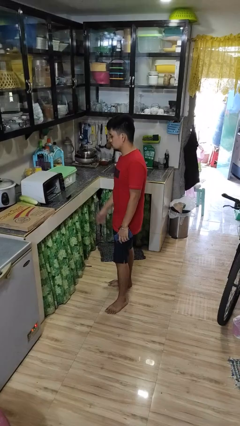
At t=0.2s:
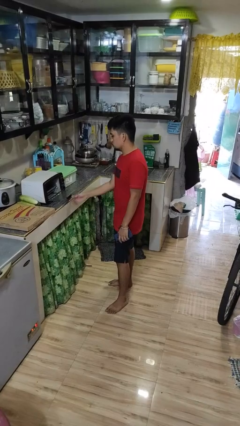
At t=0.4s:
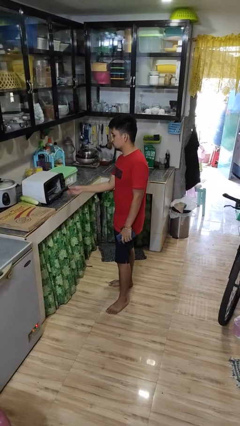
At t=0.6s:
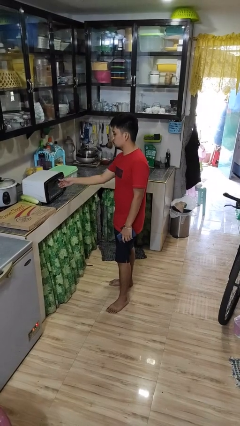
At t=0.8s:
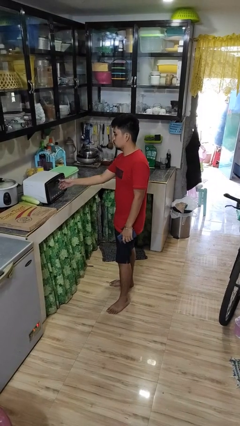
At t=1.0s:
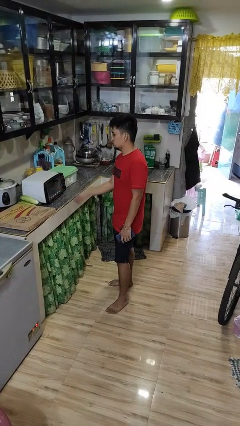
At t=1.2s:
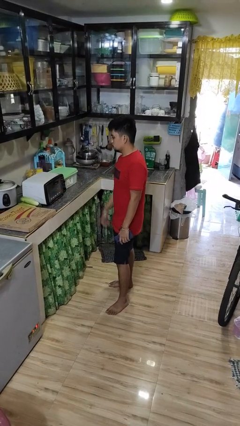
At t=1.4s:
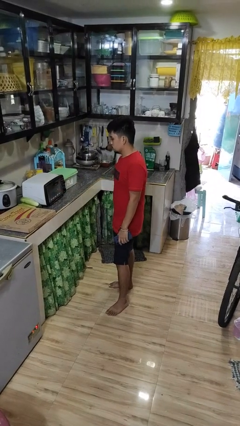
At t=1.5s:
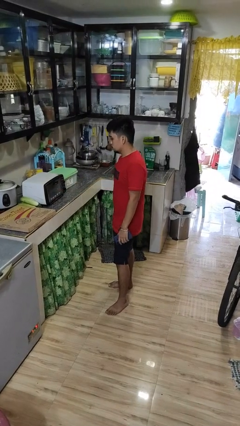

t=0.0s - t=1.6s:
person closes microwave

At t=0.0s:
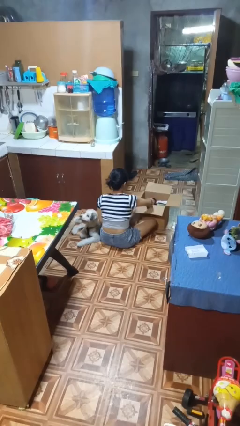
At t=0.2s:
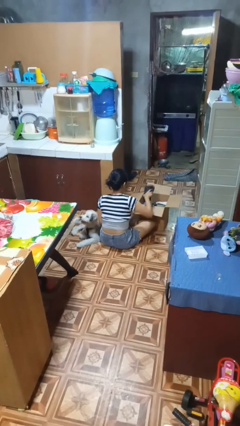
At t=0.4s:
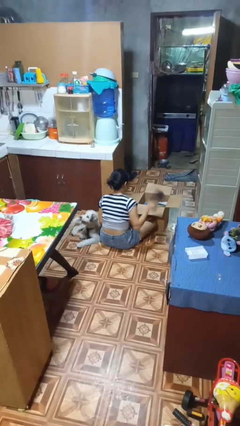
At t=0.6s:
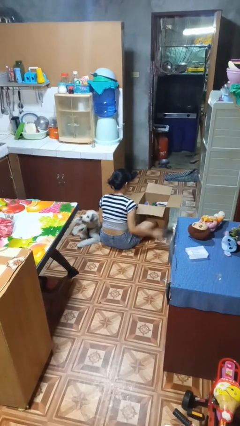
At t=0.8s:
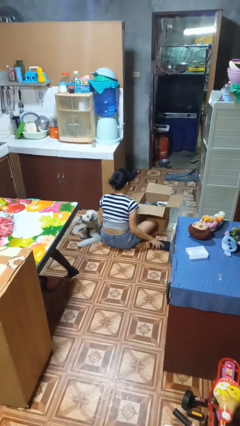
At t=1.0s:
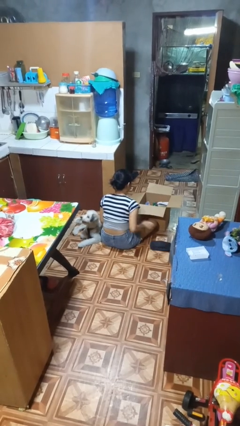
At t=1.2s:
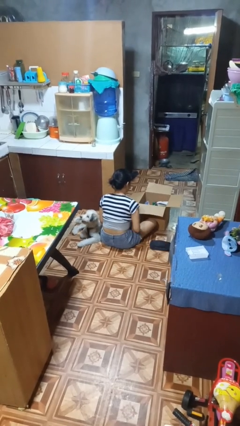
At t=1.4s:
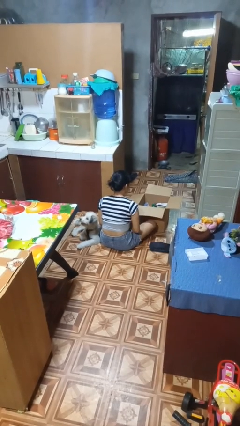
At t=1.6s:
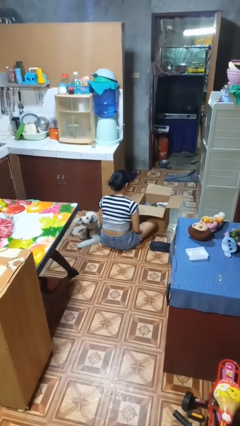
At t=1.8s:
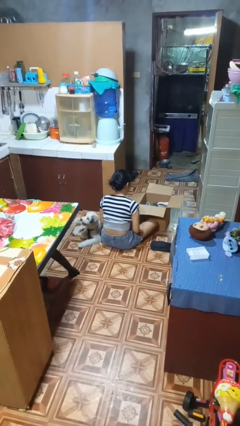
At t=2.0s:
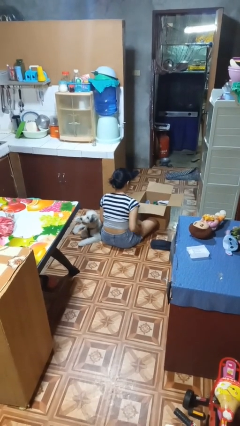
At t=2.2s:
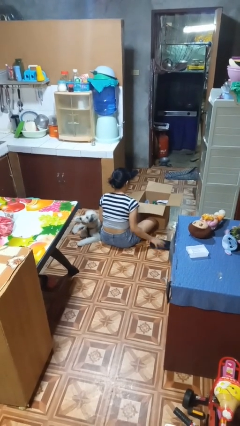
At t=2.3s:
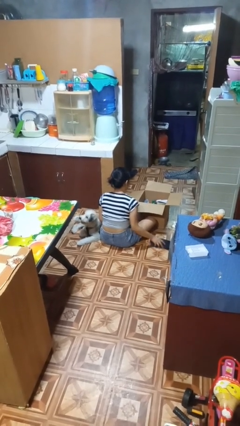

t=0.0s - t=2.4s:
person takes object from box

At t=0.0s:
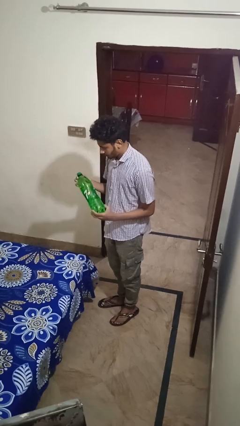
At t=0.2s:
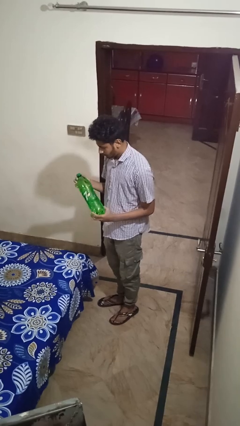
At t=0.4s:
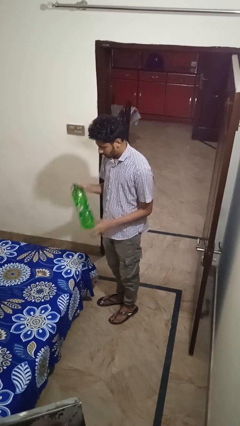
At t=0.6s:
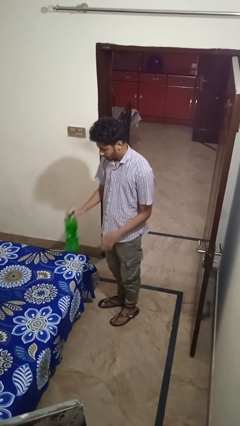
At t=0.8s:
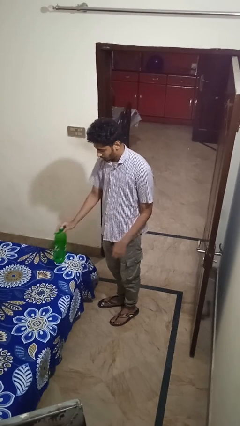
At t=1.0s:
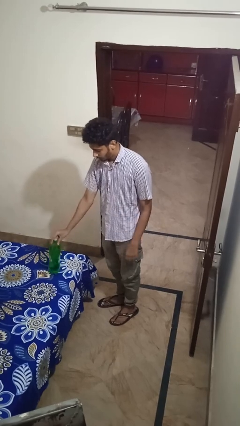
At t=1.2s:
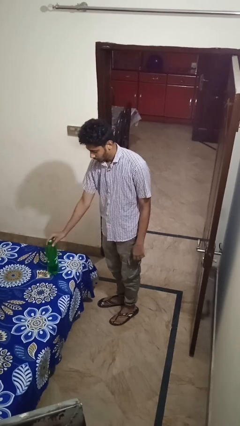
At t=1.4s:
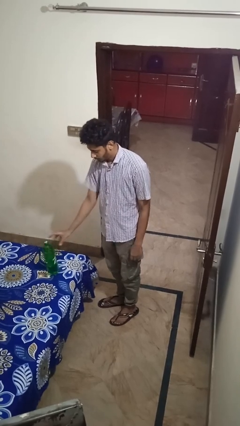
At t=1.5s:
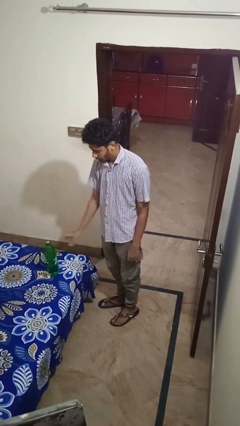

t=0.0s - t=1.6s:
person puts down object on bed

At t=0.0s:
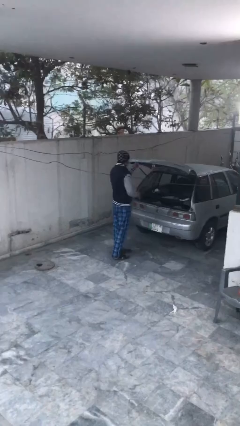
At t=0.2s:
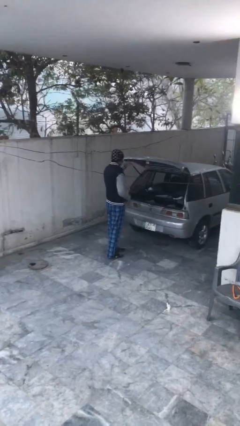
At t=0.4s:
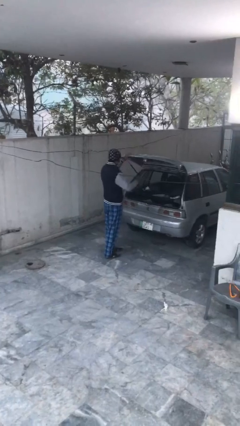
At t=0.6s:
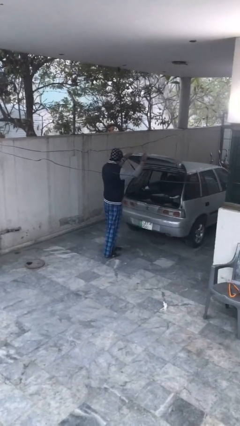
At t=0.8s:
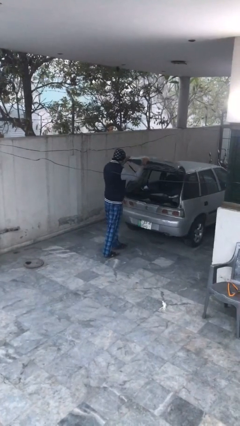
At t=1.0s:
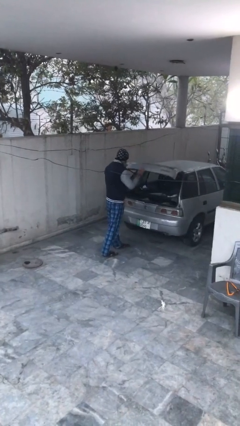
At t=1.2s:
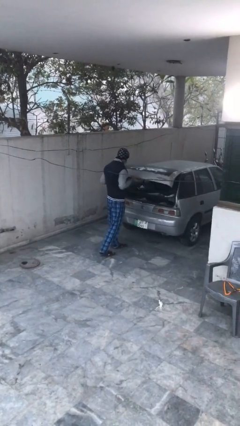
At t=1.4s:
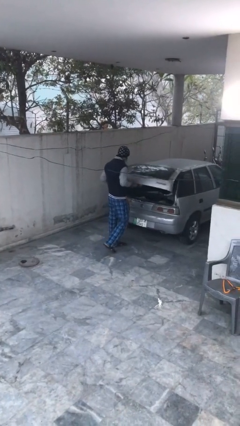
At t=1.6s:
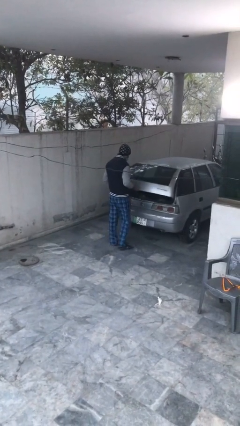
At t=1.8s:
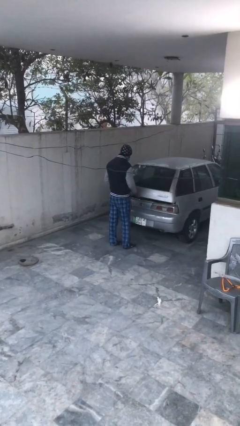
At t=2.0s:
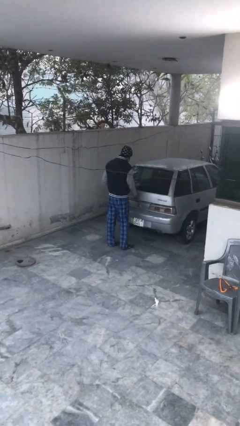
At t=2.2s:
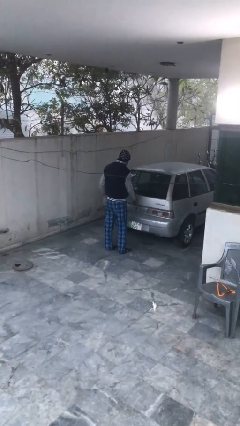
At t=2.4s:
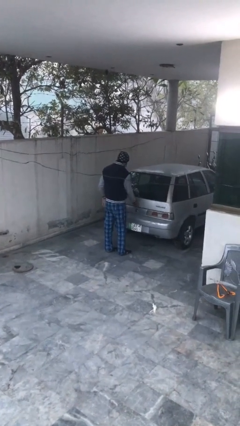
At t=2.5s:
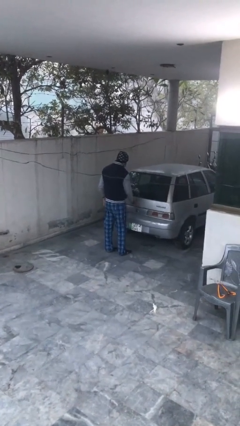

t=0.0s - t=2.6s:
person closes car trunk

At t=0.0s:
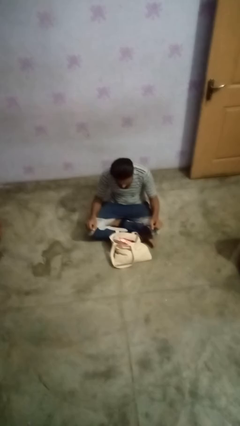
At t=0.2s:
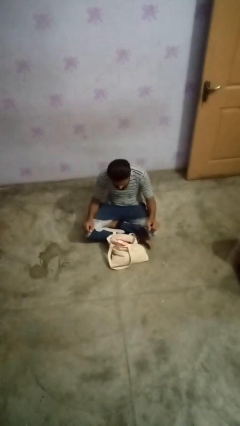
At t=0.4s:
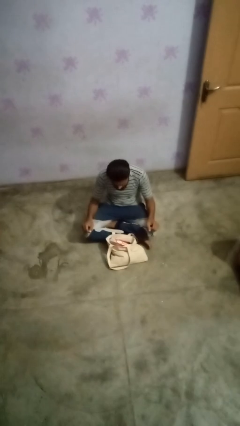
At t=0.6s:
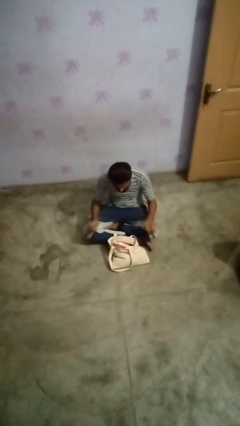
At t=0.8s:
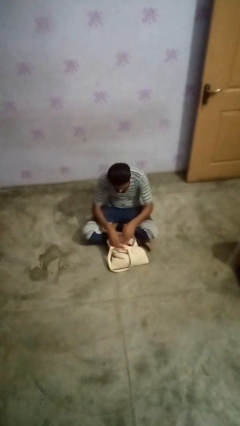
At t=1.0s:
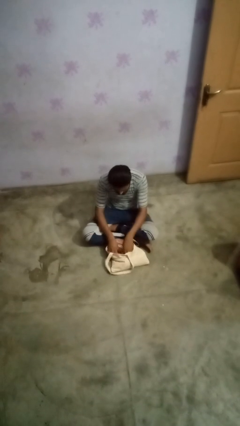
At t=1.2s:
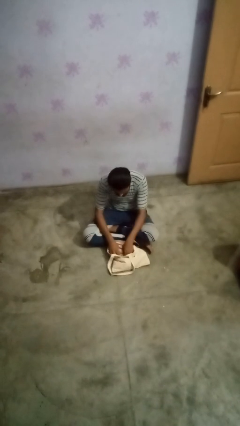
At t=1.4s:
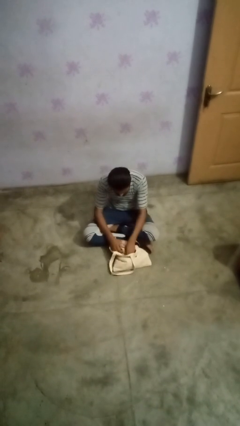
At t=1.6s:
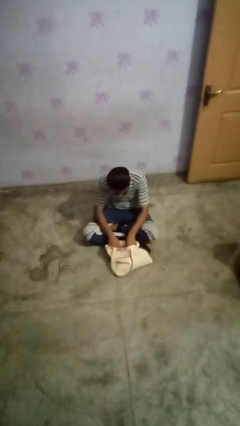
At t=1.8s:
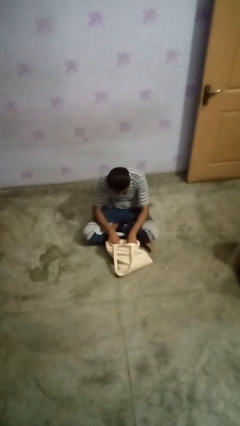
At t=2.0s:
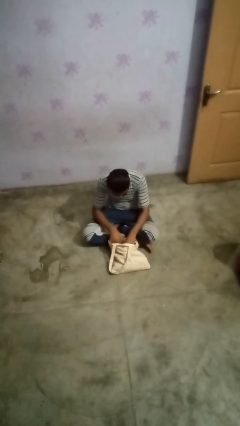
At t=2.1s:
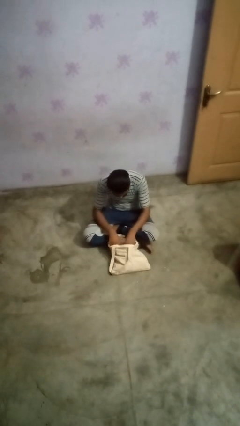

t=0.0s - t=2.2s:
person searches in bag

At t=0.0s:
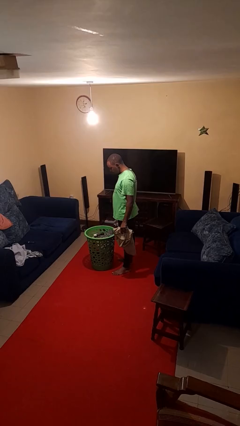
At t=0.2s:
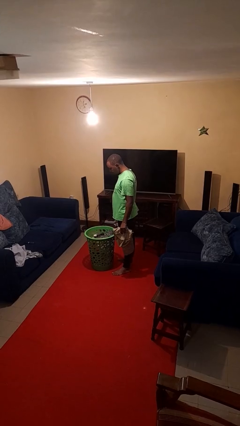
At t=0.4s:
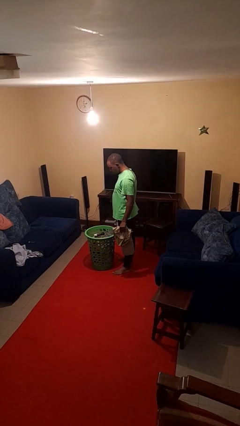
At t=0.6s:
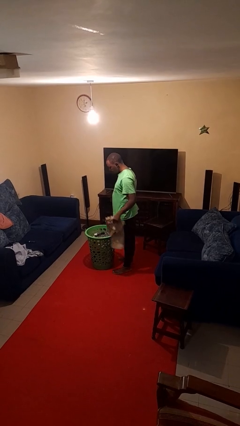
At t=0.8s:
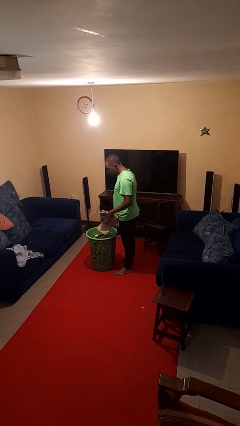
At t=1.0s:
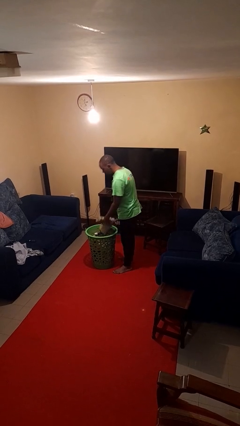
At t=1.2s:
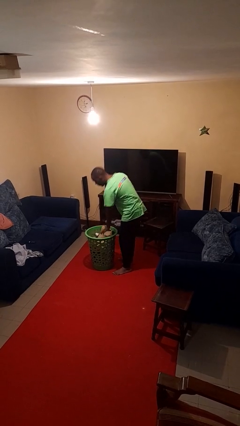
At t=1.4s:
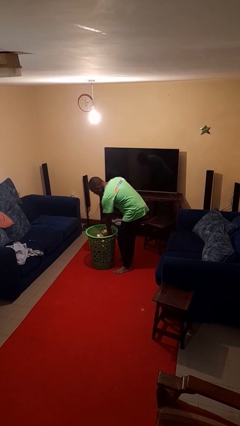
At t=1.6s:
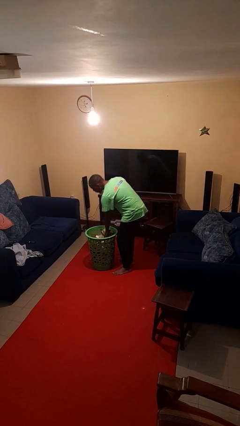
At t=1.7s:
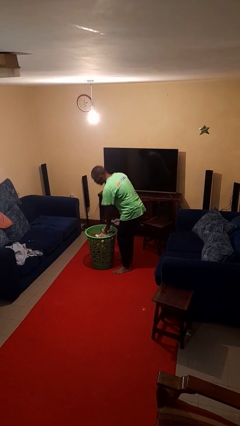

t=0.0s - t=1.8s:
person puts object into basket

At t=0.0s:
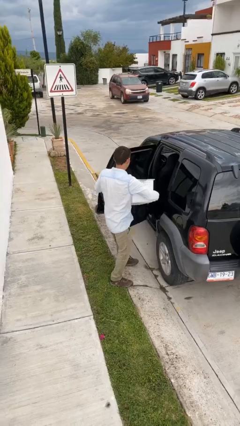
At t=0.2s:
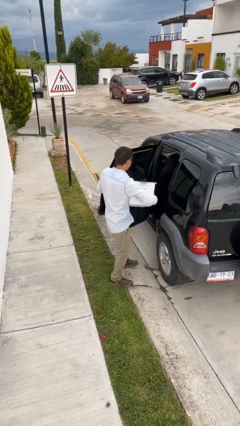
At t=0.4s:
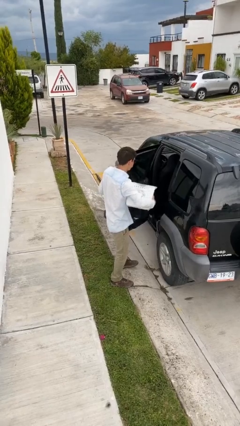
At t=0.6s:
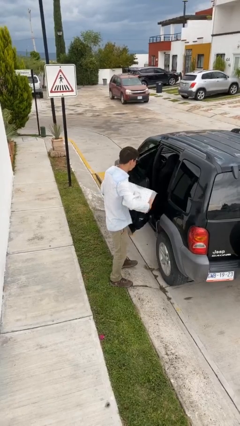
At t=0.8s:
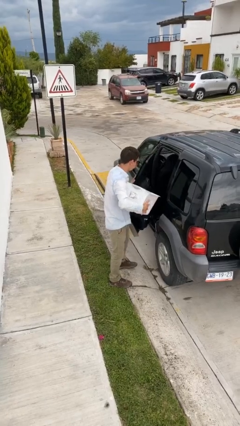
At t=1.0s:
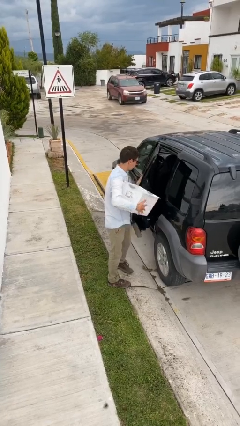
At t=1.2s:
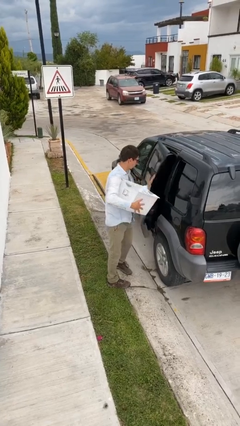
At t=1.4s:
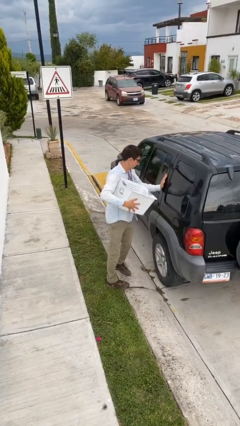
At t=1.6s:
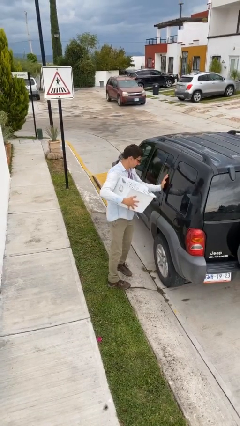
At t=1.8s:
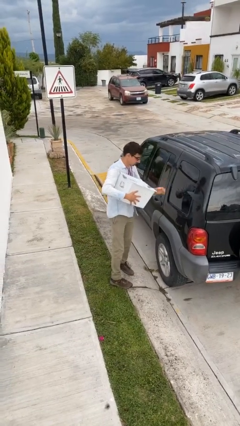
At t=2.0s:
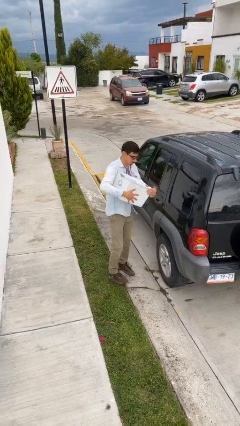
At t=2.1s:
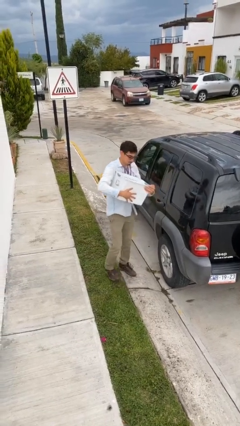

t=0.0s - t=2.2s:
person closes car door

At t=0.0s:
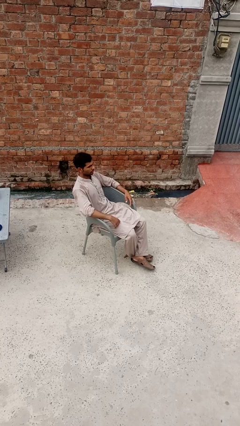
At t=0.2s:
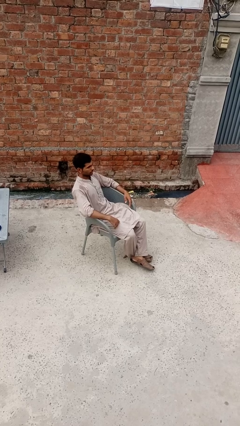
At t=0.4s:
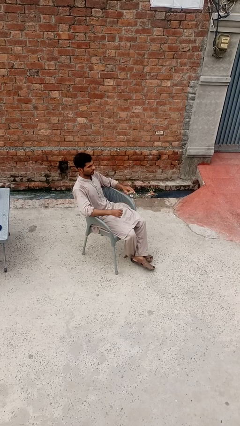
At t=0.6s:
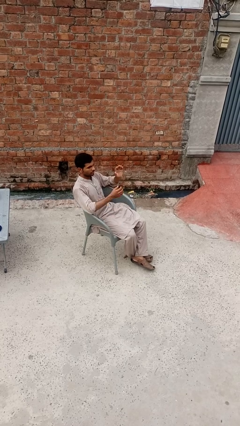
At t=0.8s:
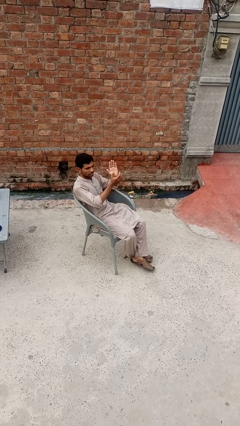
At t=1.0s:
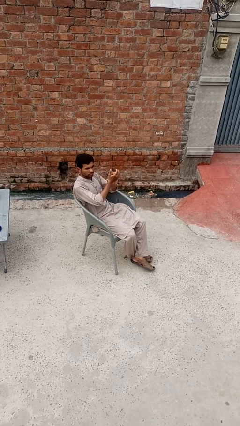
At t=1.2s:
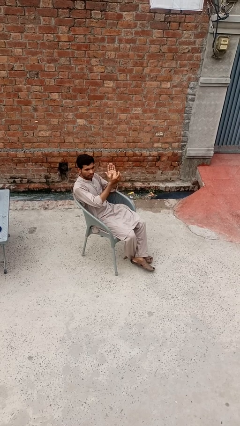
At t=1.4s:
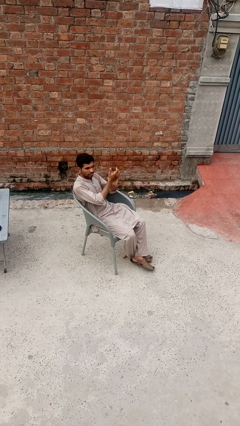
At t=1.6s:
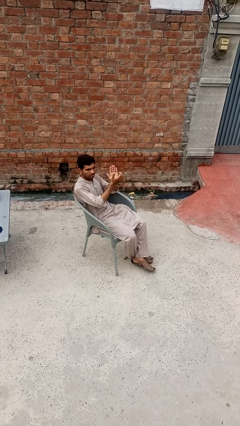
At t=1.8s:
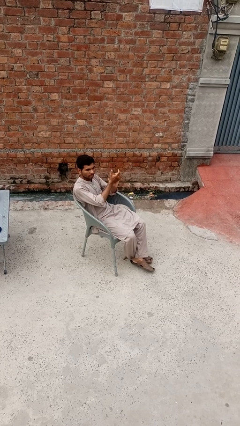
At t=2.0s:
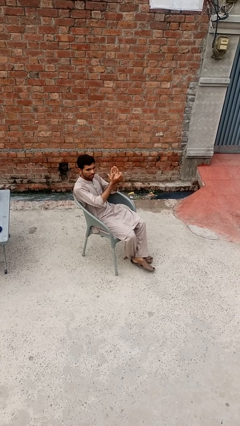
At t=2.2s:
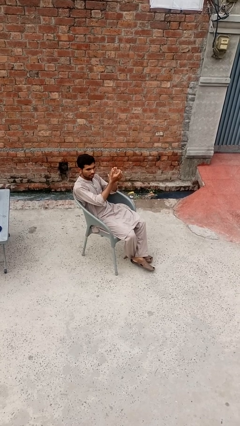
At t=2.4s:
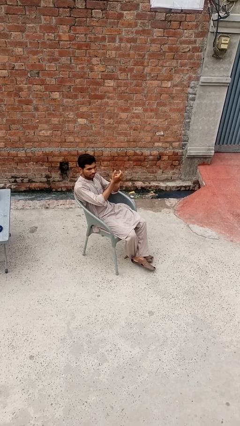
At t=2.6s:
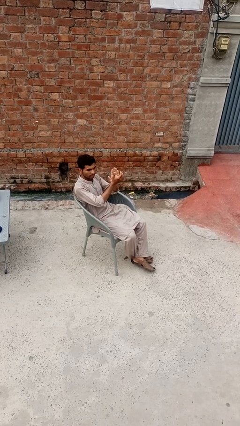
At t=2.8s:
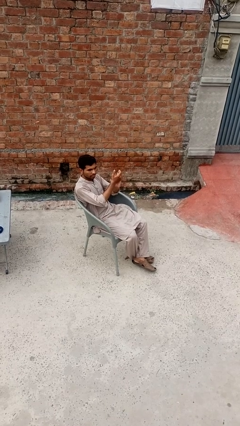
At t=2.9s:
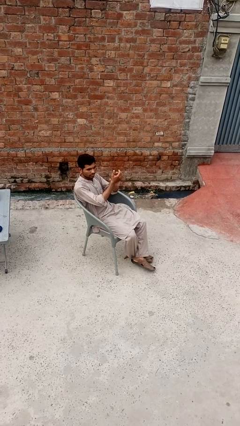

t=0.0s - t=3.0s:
person claps hands
